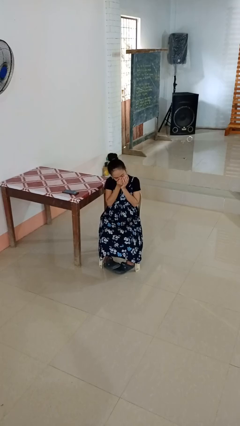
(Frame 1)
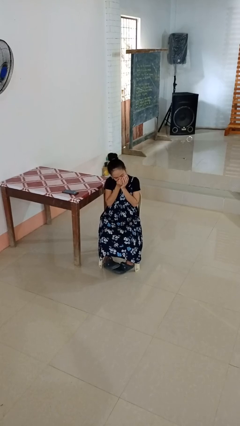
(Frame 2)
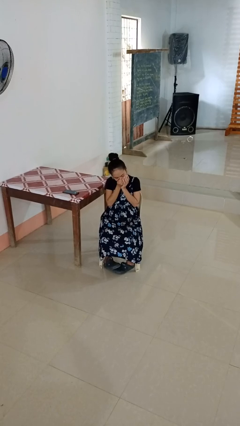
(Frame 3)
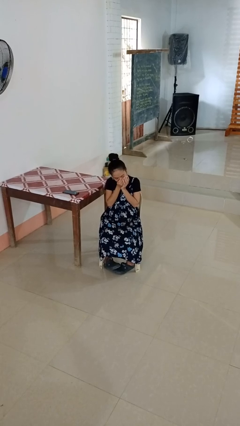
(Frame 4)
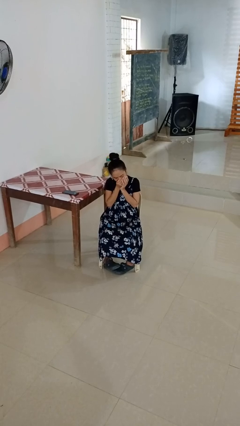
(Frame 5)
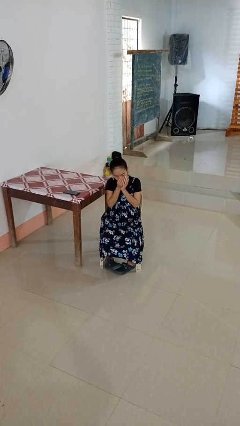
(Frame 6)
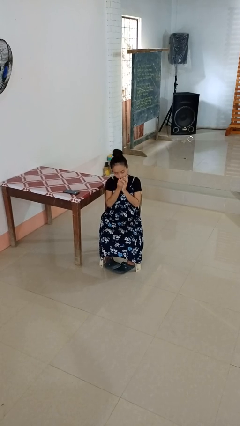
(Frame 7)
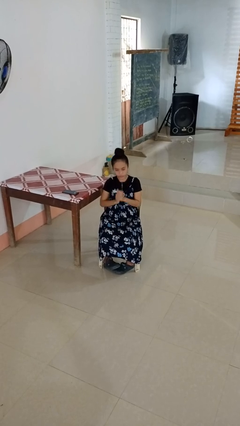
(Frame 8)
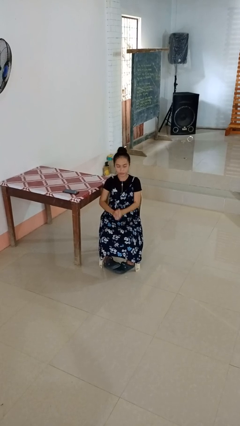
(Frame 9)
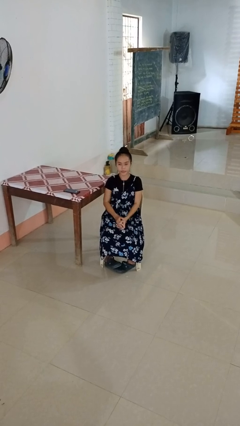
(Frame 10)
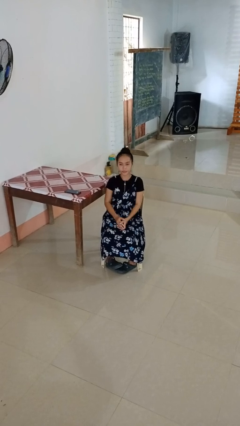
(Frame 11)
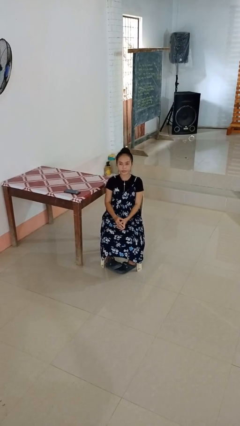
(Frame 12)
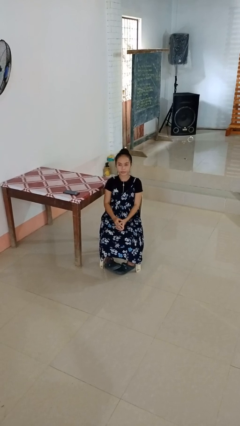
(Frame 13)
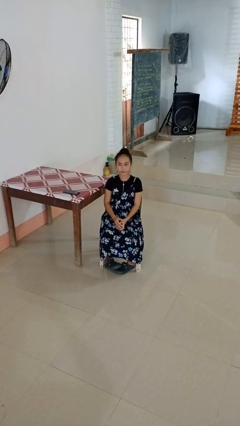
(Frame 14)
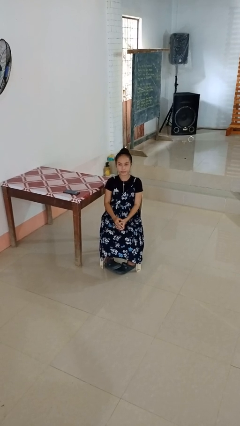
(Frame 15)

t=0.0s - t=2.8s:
person sneezes into hand

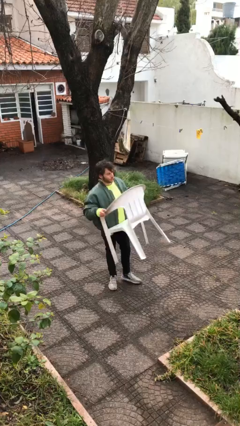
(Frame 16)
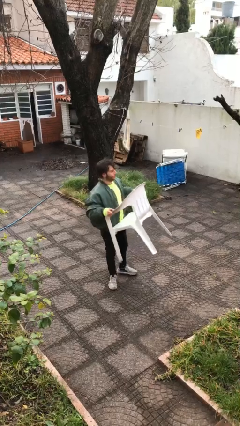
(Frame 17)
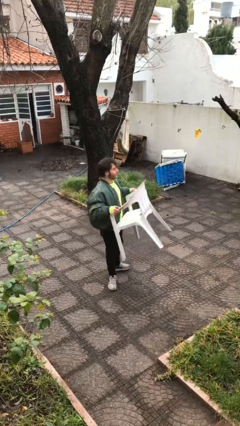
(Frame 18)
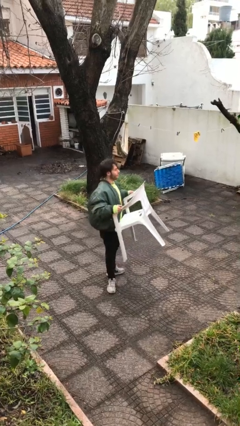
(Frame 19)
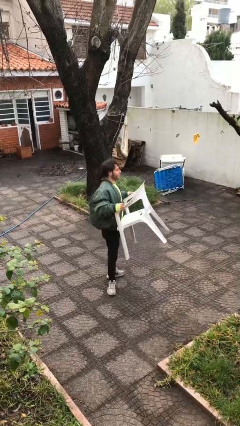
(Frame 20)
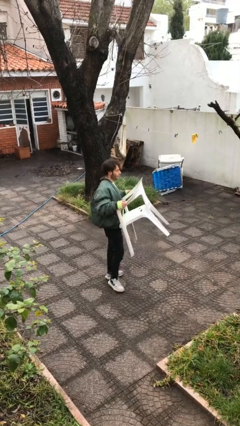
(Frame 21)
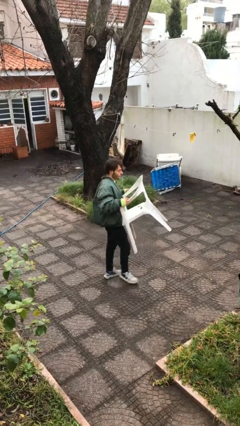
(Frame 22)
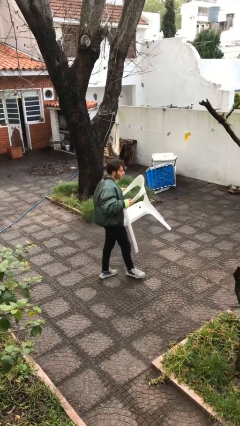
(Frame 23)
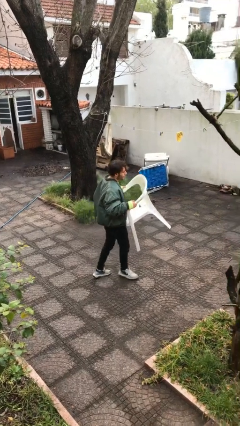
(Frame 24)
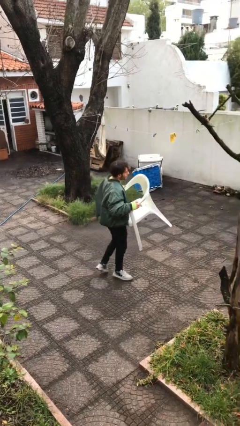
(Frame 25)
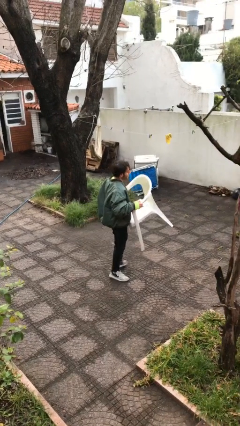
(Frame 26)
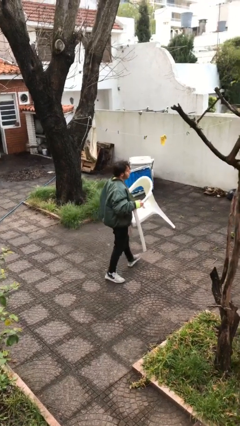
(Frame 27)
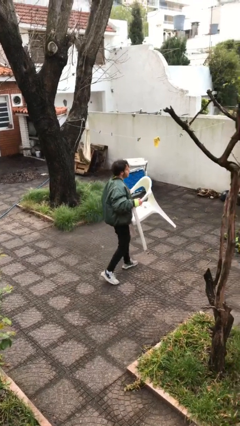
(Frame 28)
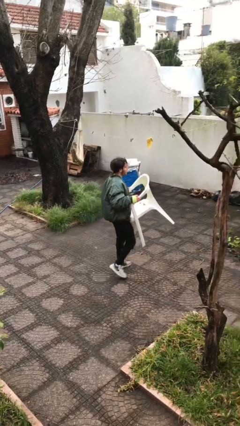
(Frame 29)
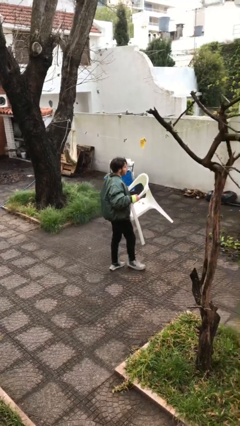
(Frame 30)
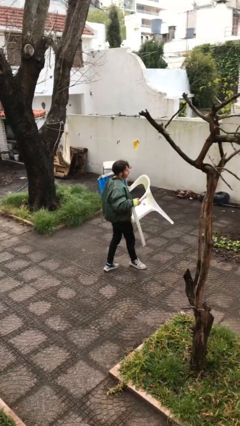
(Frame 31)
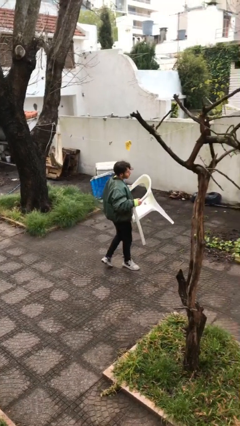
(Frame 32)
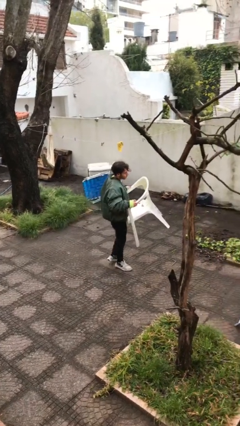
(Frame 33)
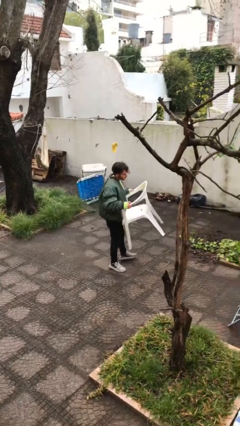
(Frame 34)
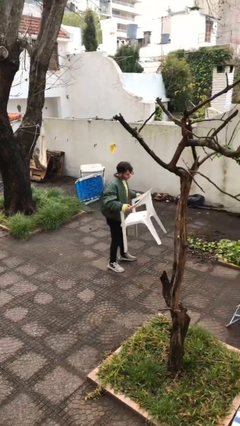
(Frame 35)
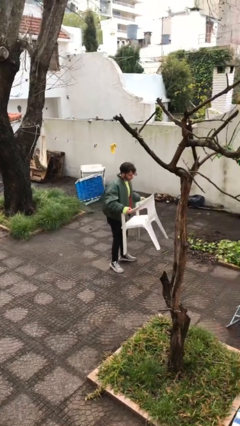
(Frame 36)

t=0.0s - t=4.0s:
person carries heavy object

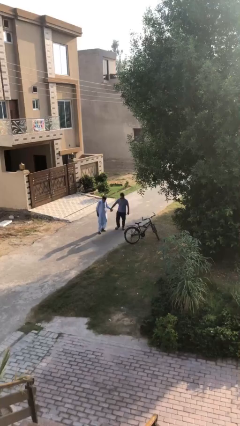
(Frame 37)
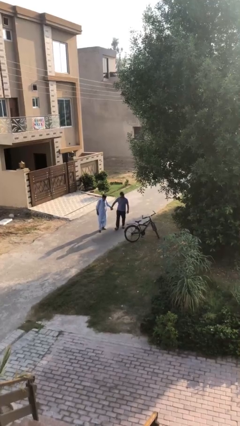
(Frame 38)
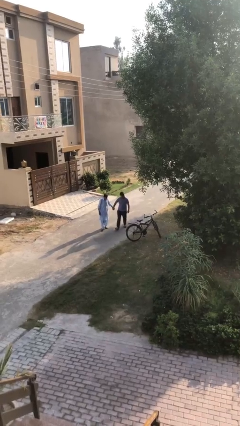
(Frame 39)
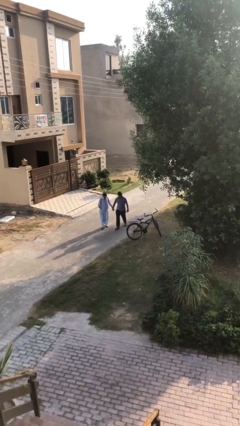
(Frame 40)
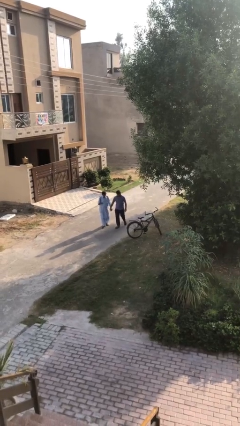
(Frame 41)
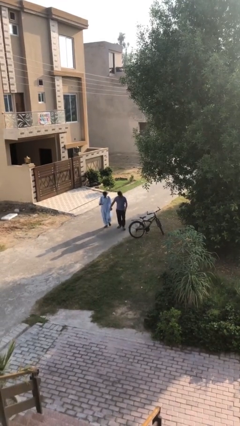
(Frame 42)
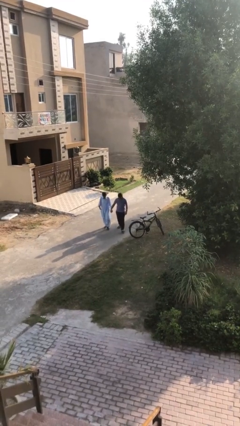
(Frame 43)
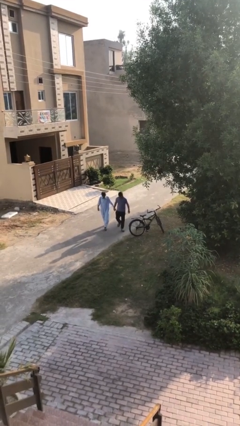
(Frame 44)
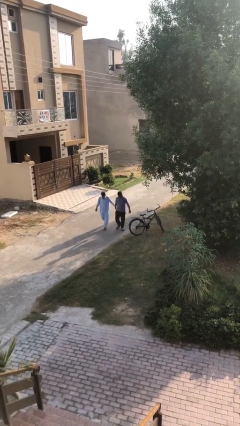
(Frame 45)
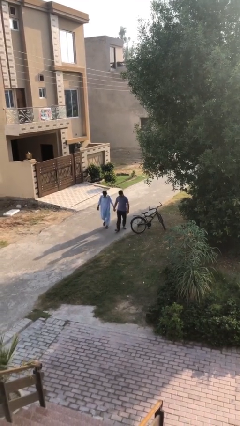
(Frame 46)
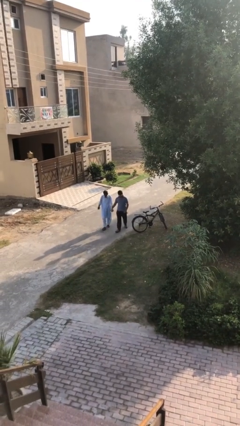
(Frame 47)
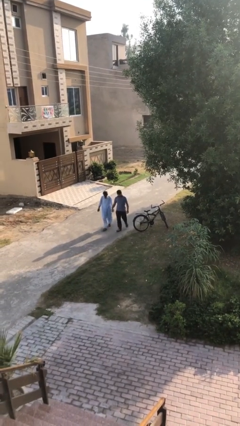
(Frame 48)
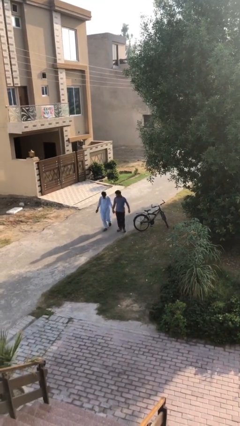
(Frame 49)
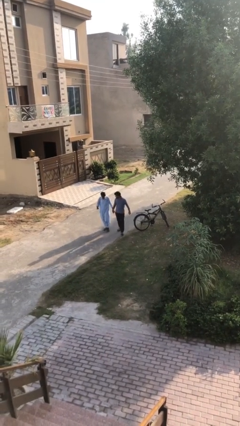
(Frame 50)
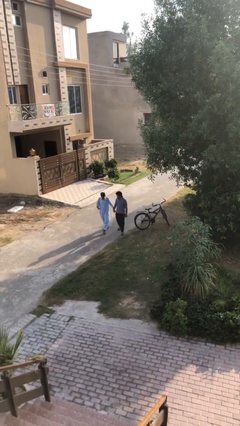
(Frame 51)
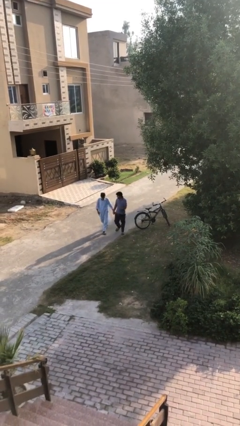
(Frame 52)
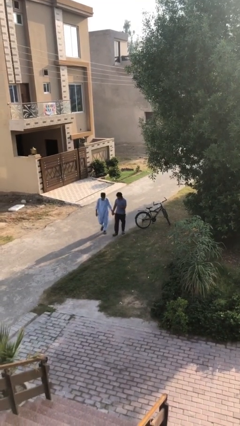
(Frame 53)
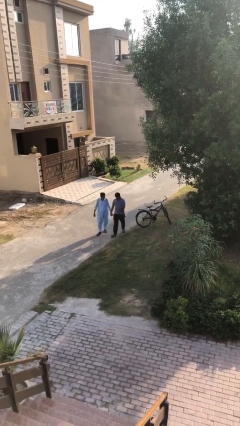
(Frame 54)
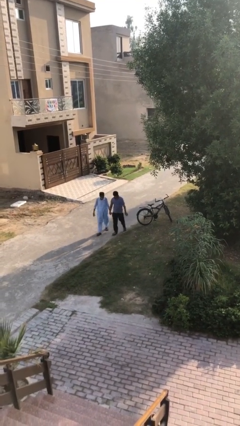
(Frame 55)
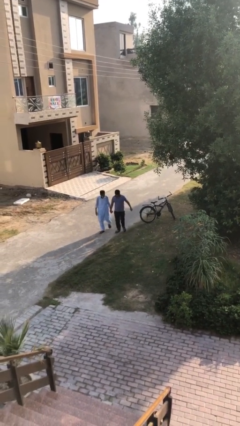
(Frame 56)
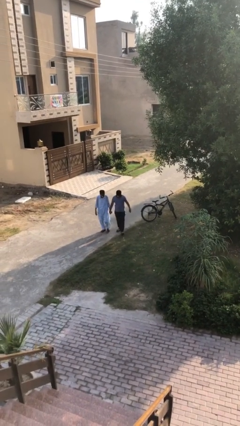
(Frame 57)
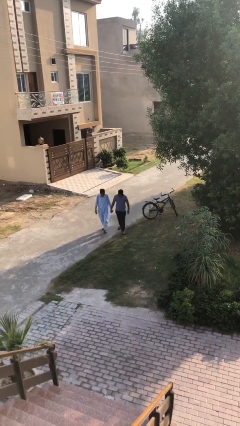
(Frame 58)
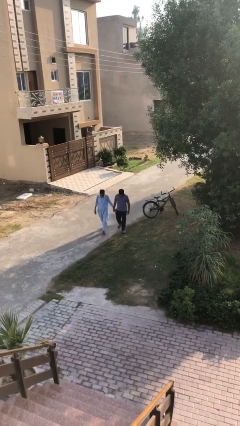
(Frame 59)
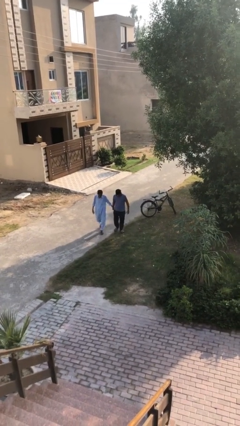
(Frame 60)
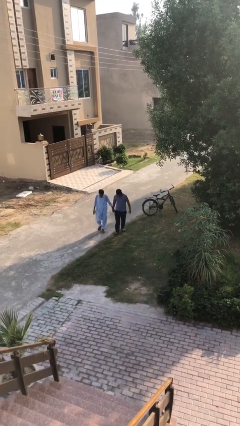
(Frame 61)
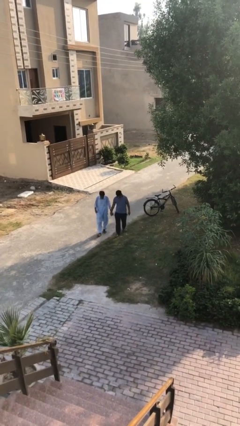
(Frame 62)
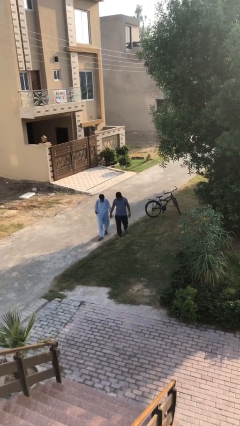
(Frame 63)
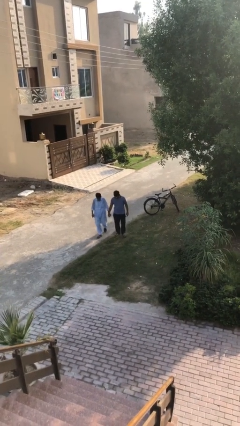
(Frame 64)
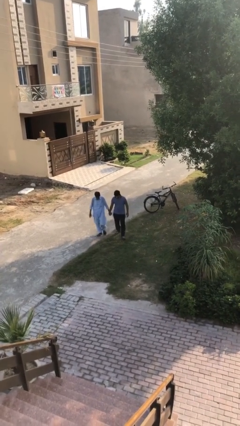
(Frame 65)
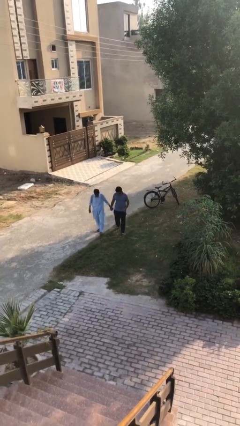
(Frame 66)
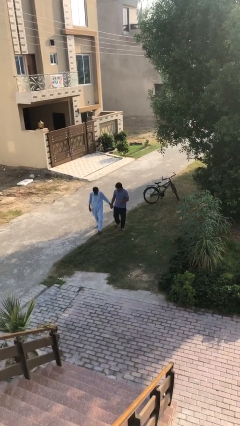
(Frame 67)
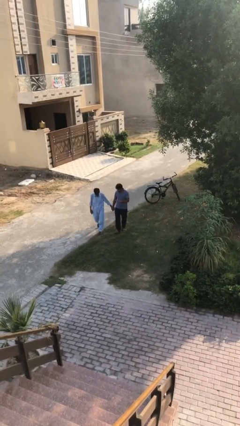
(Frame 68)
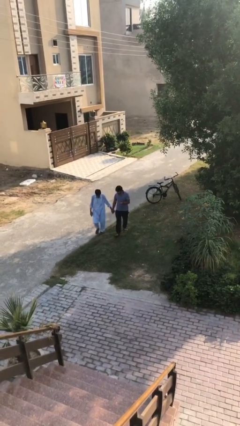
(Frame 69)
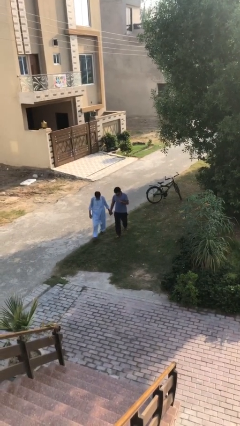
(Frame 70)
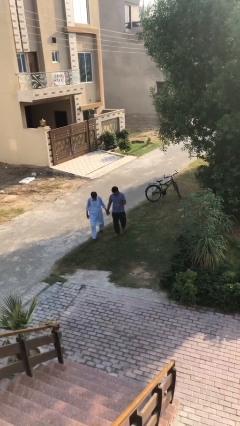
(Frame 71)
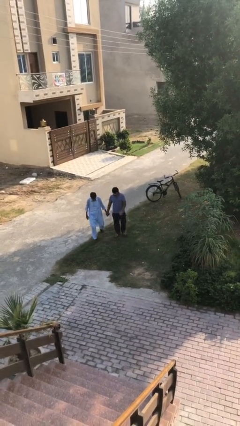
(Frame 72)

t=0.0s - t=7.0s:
person holds hand

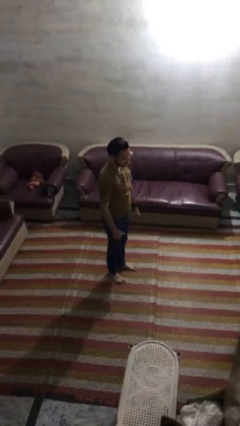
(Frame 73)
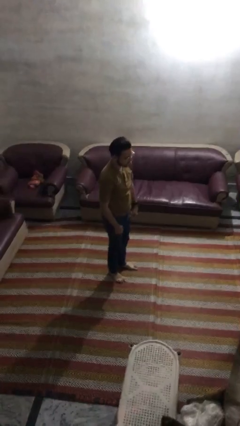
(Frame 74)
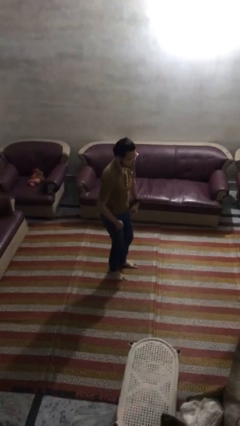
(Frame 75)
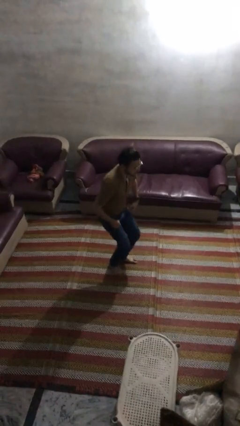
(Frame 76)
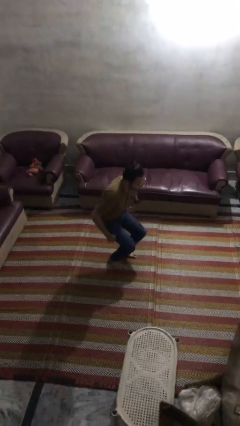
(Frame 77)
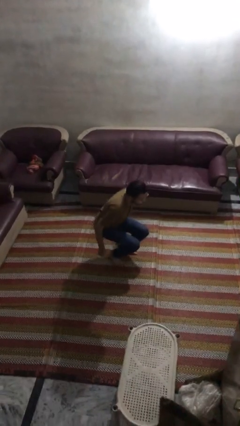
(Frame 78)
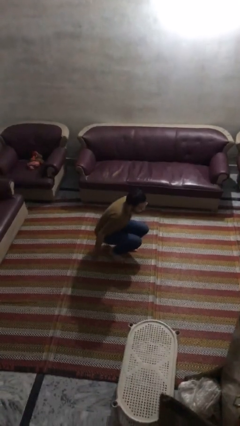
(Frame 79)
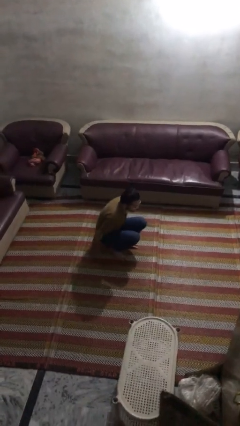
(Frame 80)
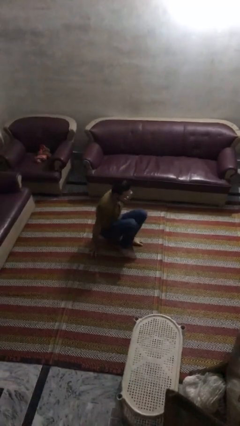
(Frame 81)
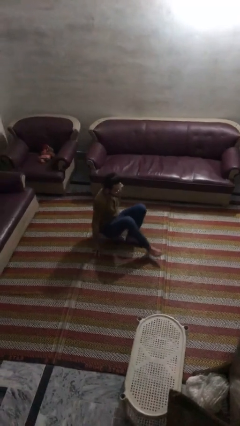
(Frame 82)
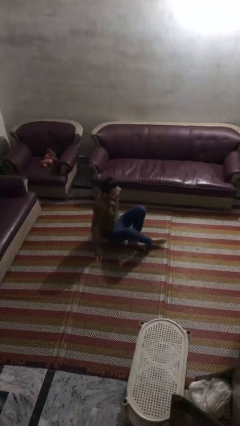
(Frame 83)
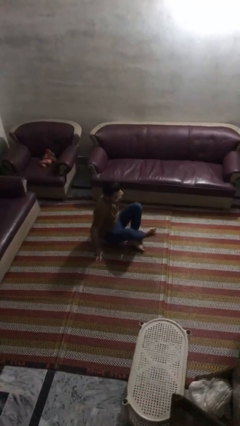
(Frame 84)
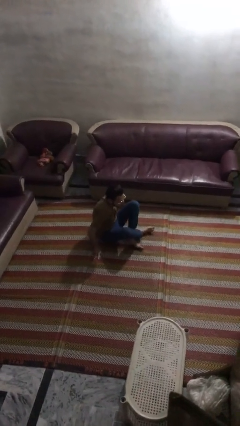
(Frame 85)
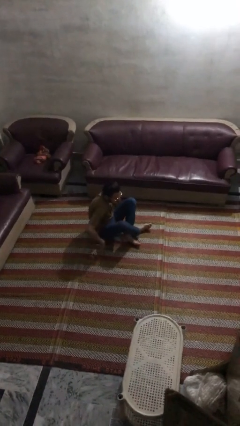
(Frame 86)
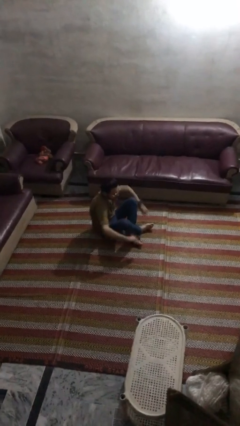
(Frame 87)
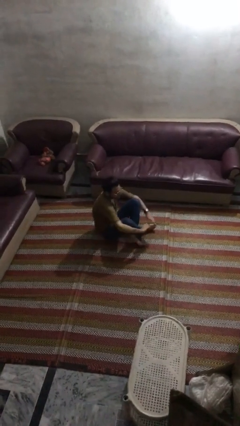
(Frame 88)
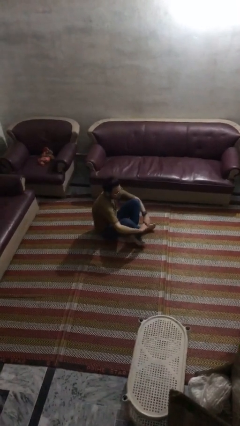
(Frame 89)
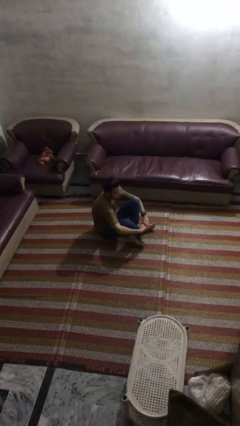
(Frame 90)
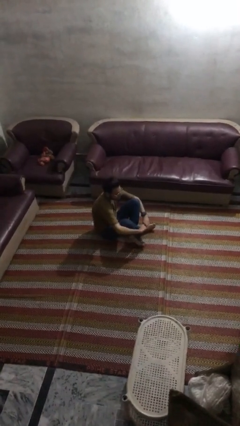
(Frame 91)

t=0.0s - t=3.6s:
person sits crisscross

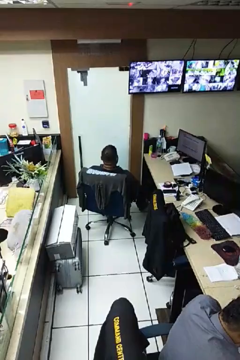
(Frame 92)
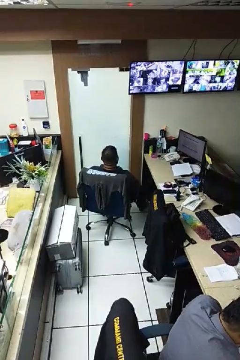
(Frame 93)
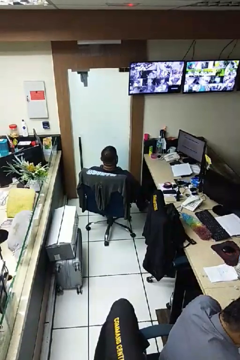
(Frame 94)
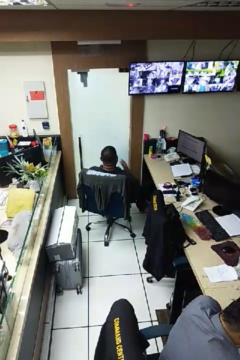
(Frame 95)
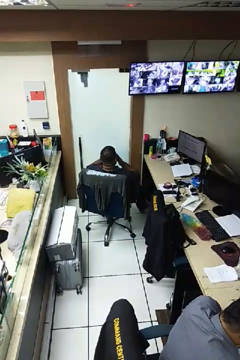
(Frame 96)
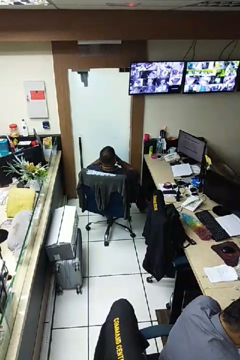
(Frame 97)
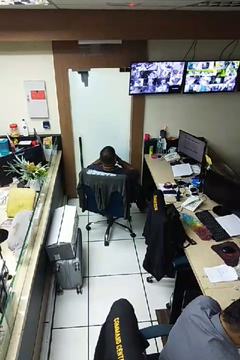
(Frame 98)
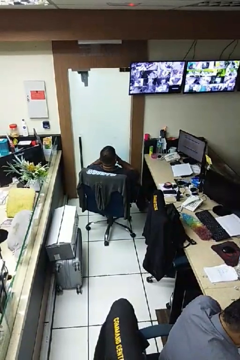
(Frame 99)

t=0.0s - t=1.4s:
person covers face with hands
